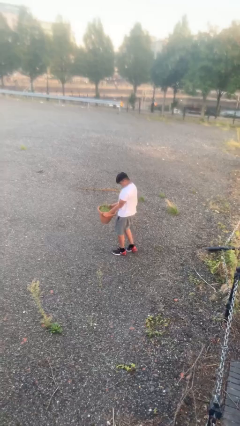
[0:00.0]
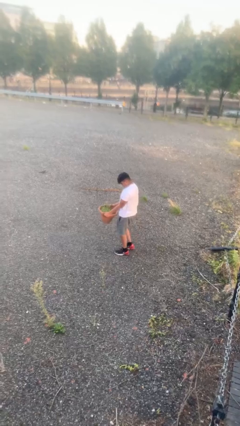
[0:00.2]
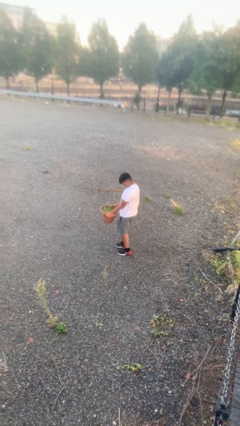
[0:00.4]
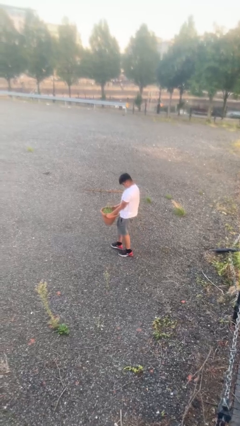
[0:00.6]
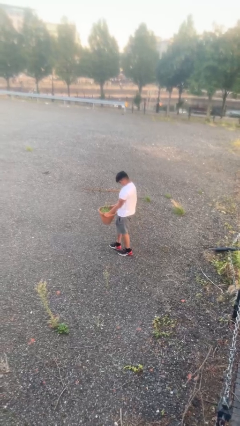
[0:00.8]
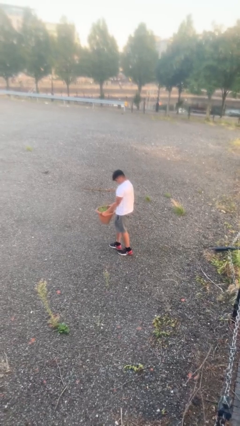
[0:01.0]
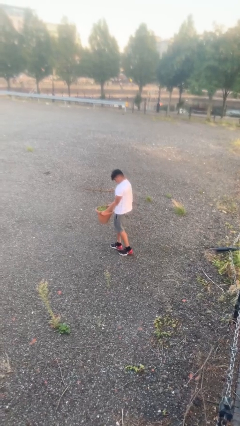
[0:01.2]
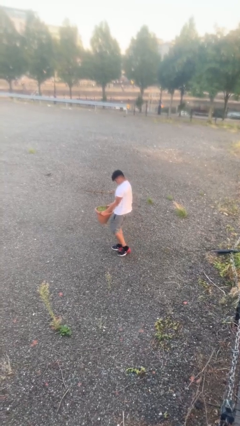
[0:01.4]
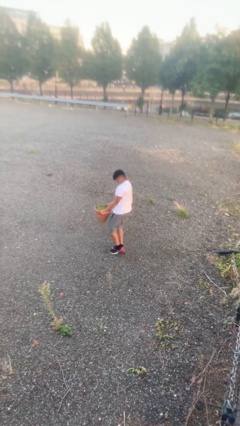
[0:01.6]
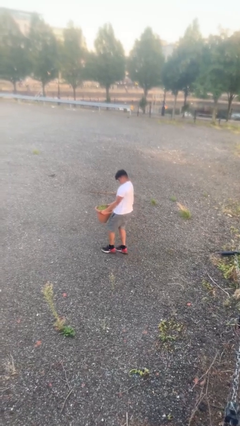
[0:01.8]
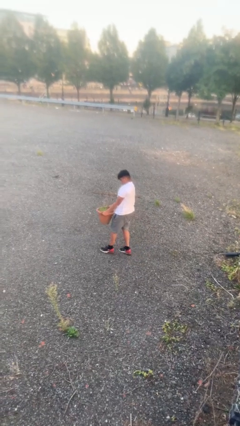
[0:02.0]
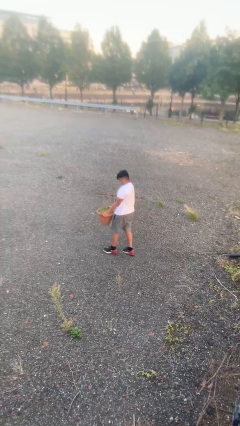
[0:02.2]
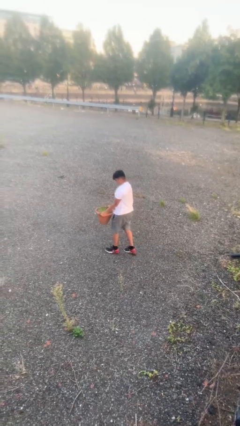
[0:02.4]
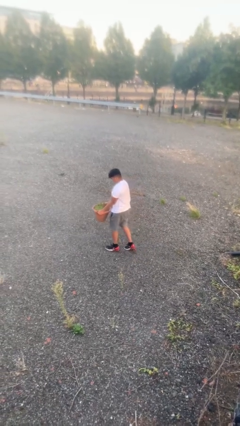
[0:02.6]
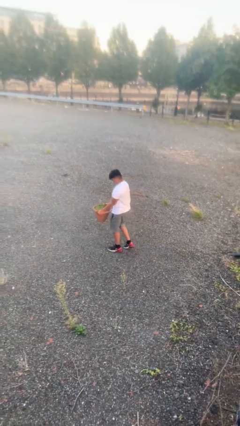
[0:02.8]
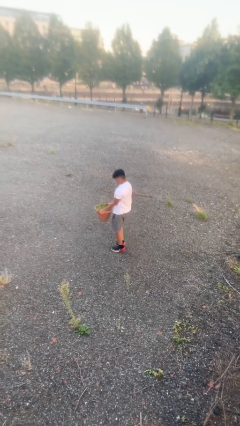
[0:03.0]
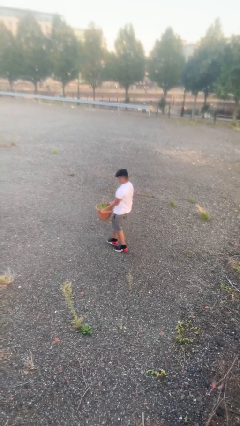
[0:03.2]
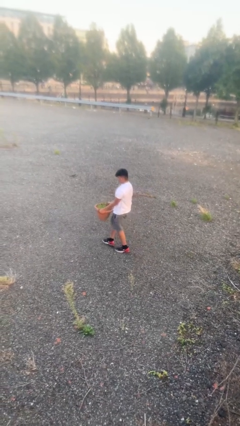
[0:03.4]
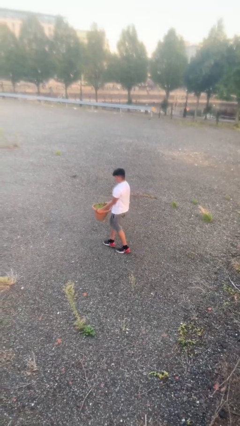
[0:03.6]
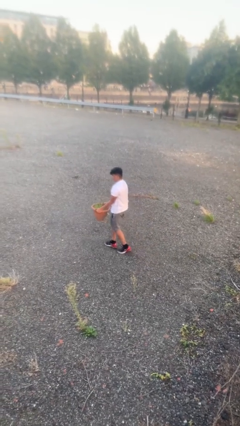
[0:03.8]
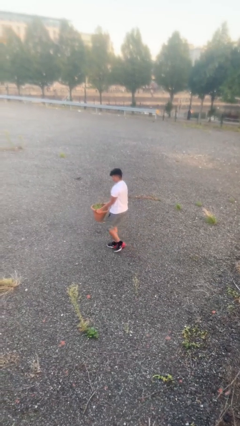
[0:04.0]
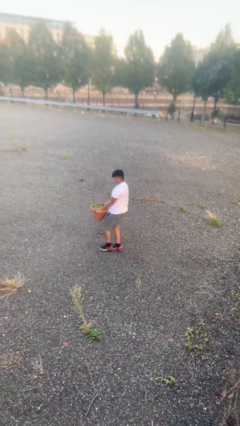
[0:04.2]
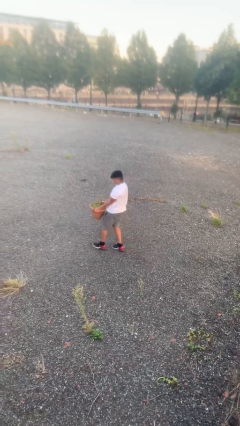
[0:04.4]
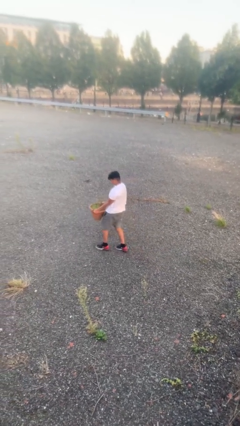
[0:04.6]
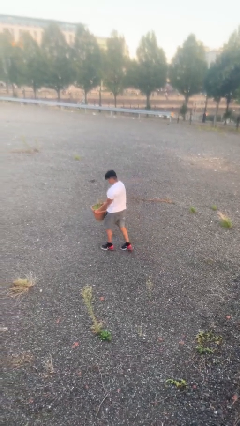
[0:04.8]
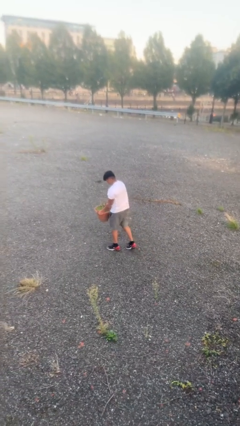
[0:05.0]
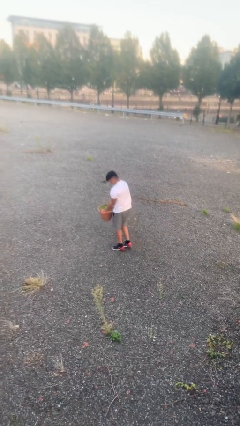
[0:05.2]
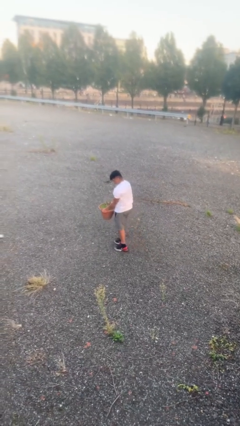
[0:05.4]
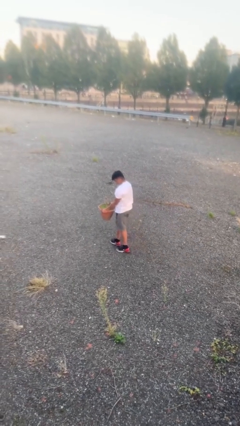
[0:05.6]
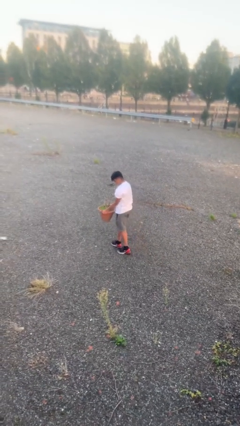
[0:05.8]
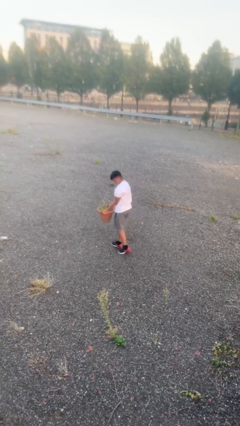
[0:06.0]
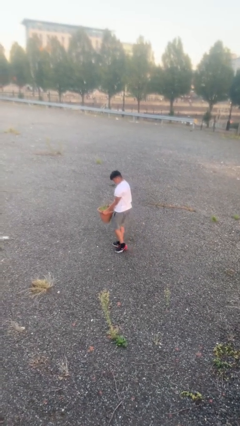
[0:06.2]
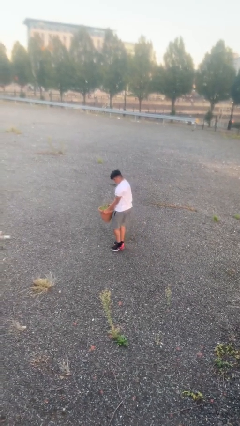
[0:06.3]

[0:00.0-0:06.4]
person carries heavy object

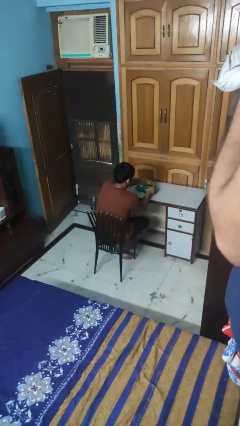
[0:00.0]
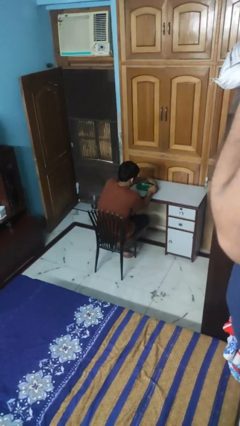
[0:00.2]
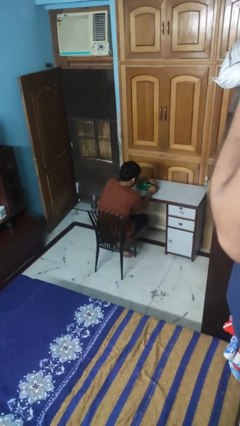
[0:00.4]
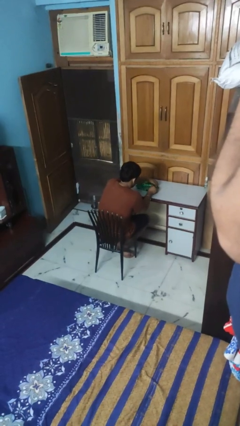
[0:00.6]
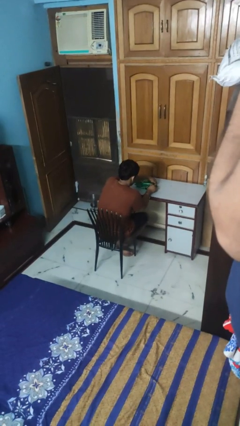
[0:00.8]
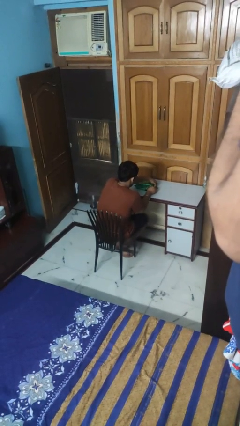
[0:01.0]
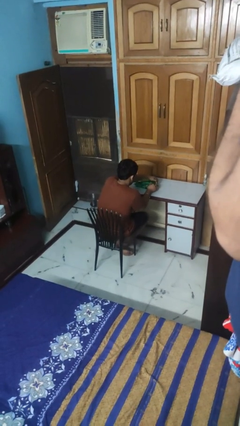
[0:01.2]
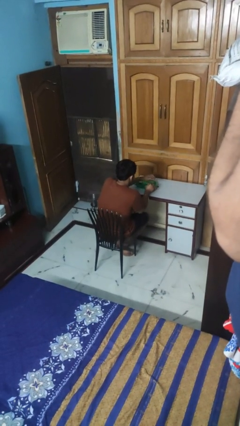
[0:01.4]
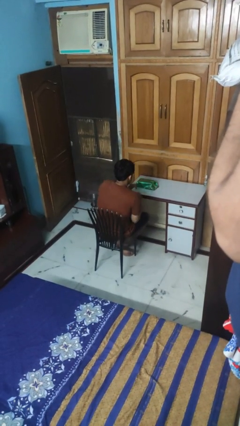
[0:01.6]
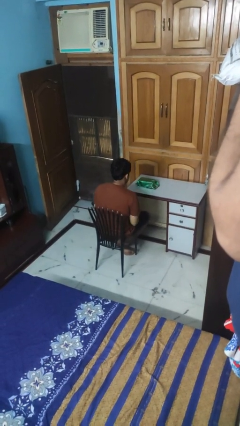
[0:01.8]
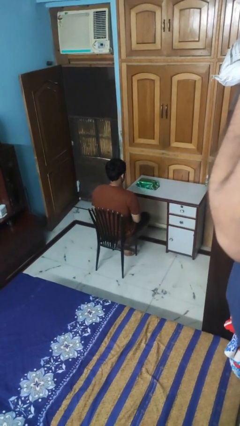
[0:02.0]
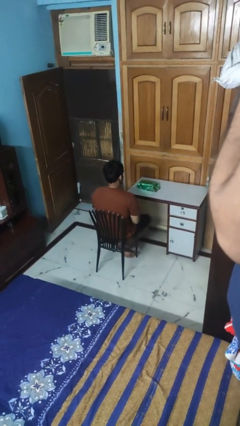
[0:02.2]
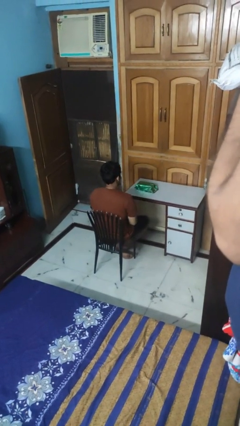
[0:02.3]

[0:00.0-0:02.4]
person wraps box

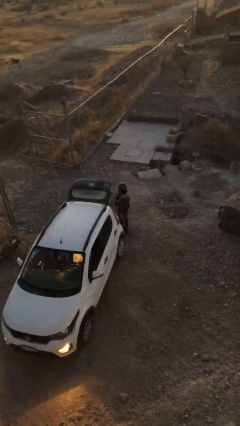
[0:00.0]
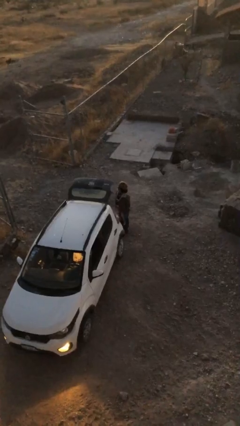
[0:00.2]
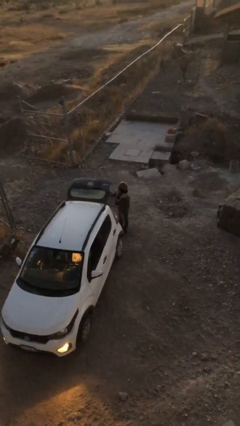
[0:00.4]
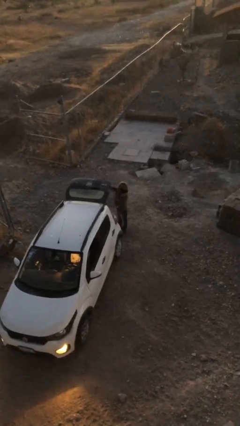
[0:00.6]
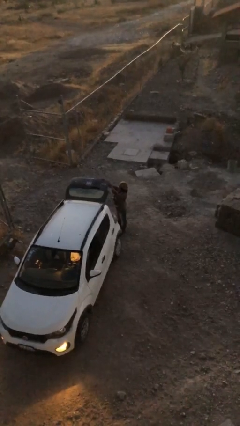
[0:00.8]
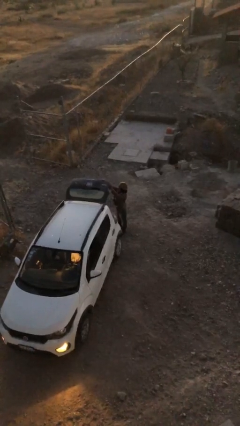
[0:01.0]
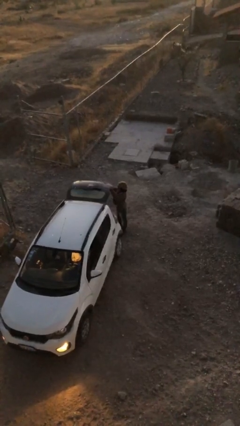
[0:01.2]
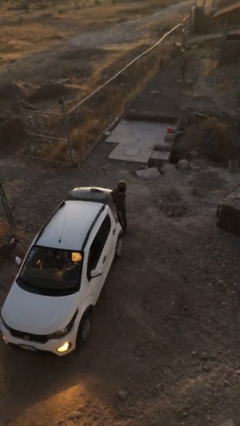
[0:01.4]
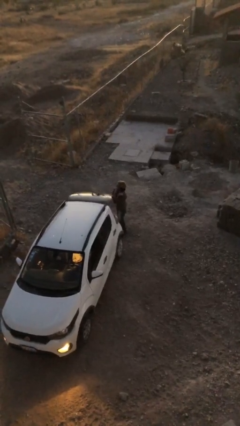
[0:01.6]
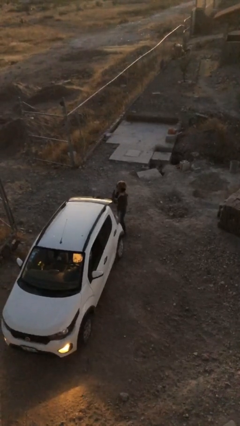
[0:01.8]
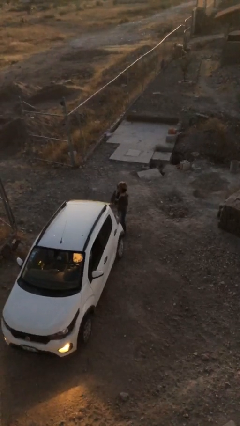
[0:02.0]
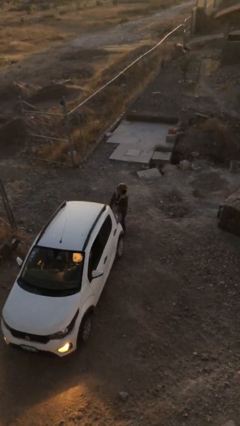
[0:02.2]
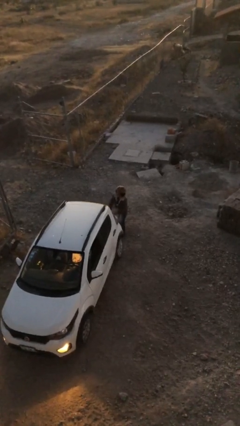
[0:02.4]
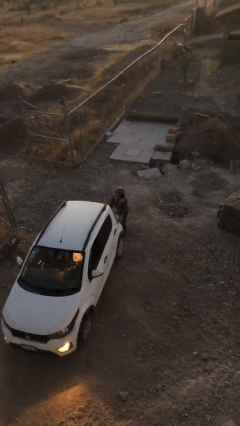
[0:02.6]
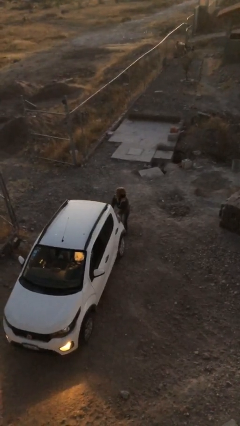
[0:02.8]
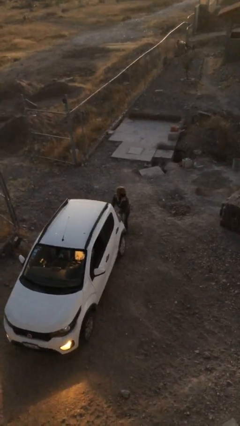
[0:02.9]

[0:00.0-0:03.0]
person closes car trunk

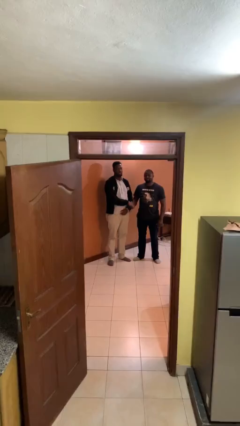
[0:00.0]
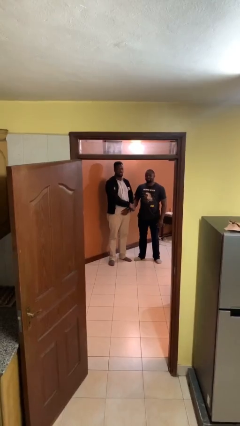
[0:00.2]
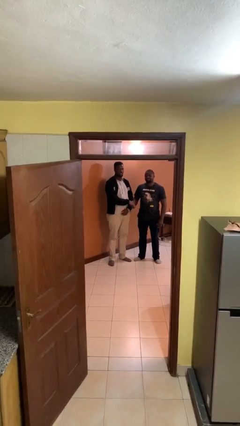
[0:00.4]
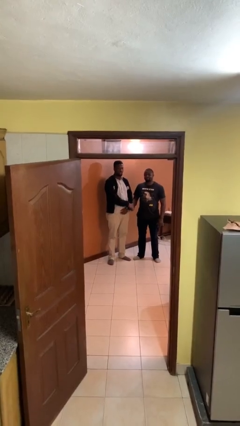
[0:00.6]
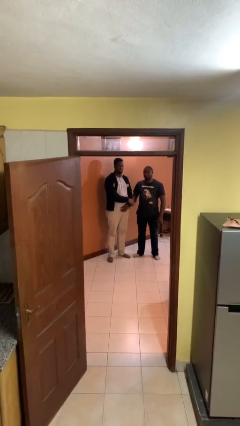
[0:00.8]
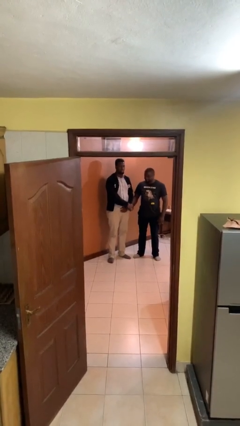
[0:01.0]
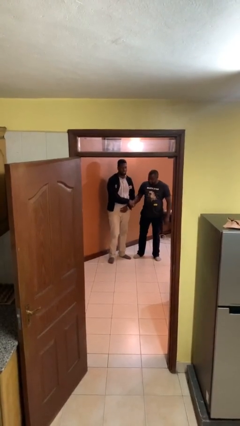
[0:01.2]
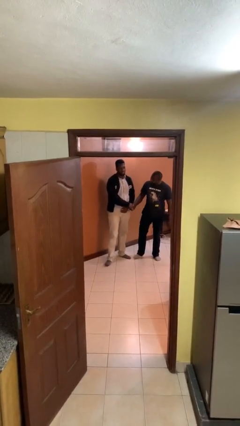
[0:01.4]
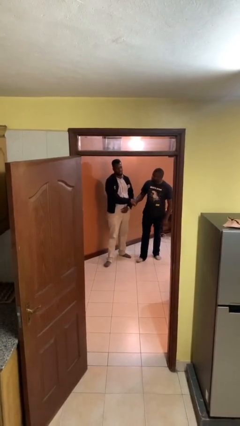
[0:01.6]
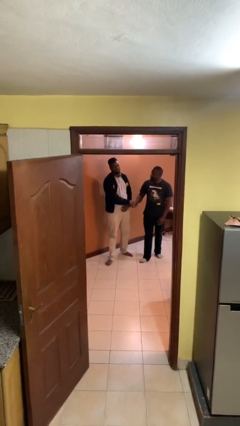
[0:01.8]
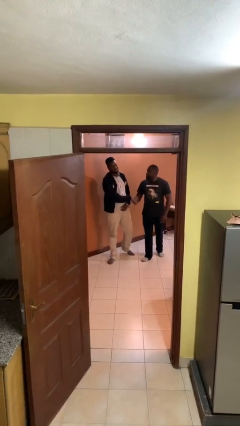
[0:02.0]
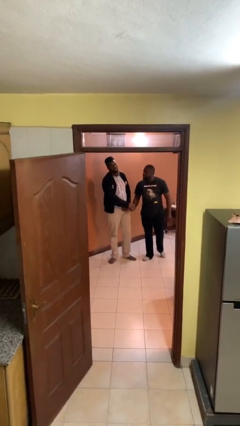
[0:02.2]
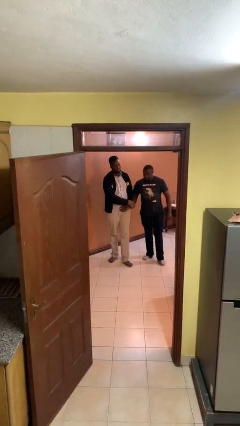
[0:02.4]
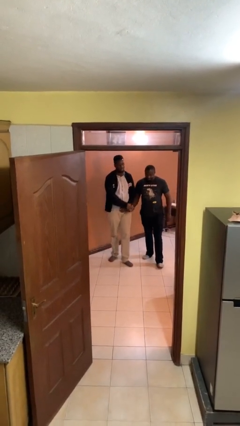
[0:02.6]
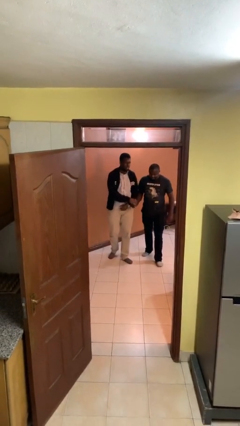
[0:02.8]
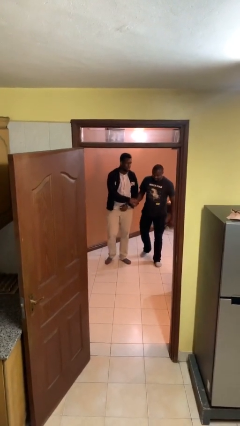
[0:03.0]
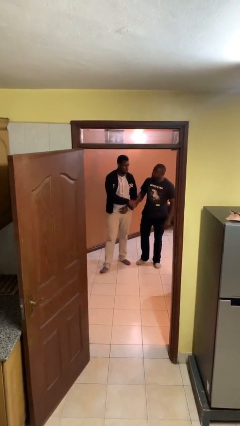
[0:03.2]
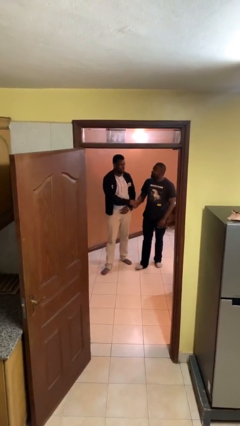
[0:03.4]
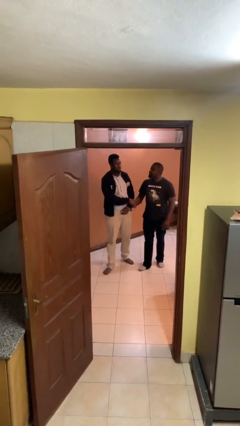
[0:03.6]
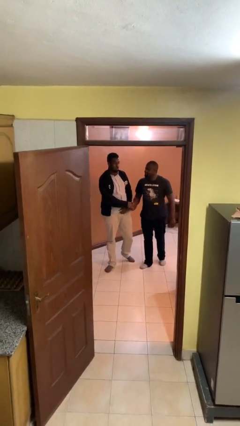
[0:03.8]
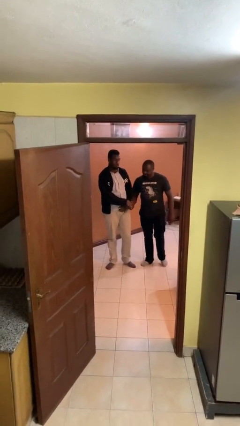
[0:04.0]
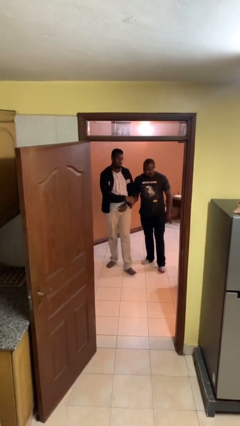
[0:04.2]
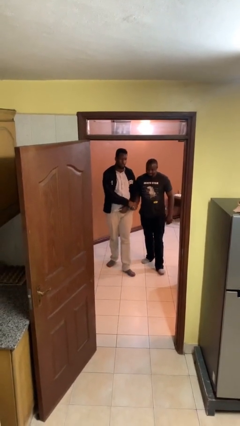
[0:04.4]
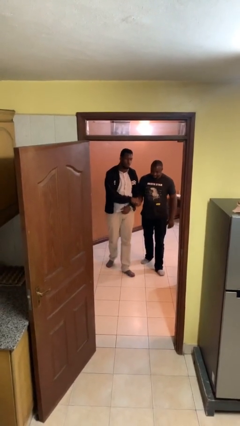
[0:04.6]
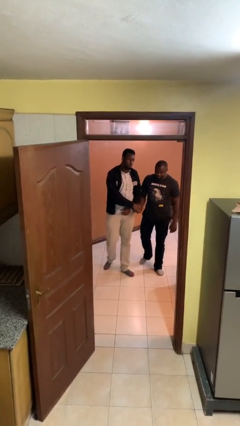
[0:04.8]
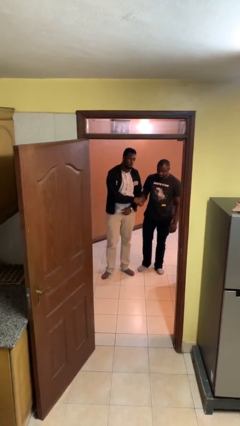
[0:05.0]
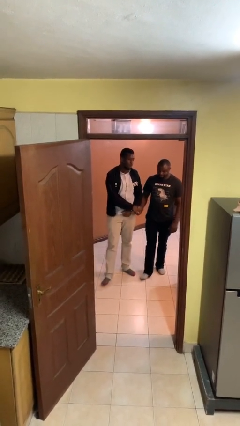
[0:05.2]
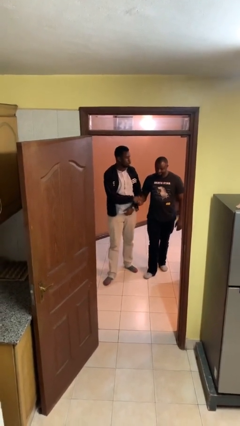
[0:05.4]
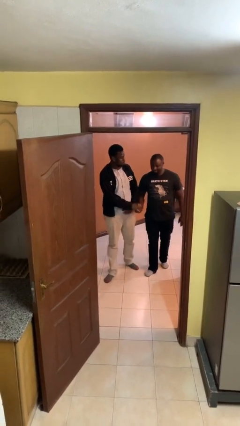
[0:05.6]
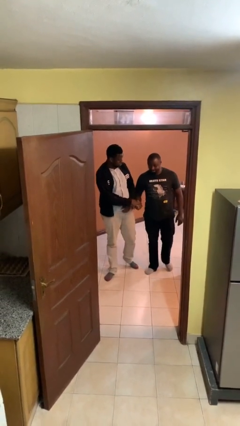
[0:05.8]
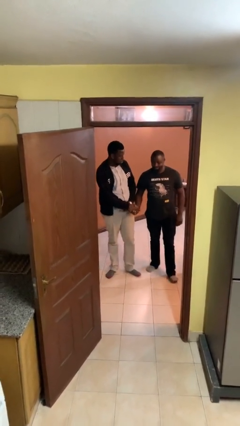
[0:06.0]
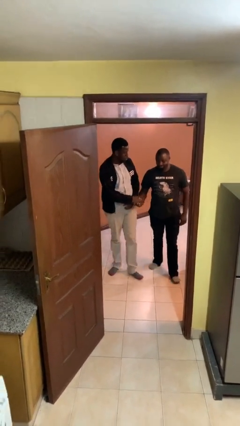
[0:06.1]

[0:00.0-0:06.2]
person holds hand

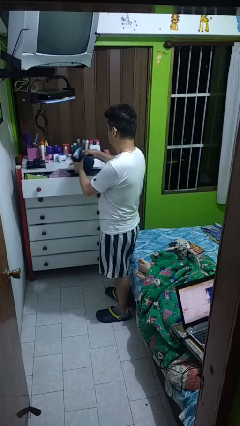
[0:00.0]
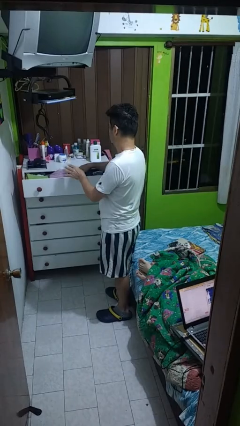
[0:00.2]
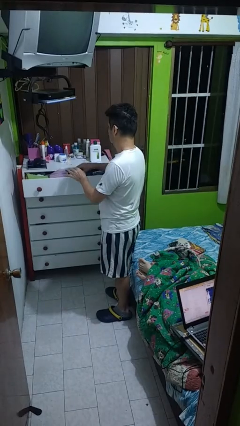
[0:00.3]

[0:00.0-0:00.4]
person puts clothes into dresser
